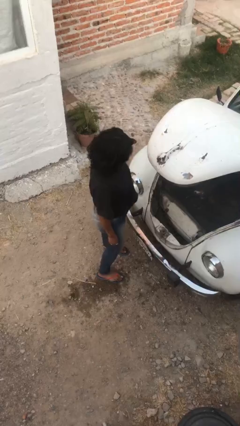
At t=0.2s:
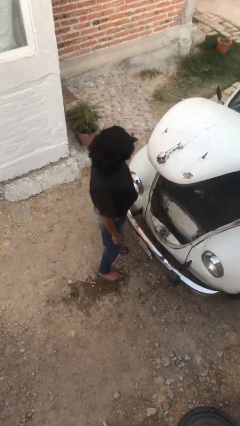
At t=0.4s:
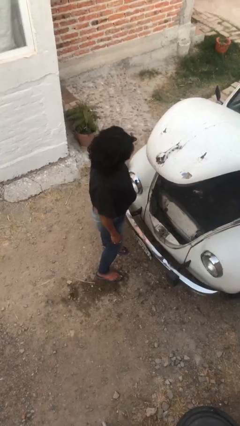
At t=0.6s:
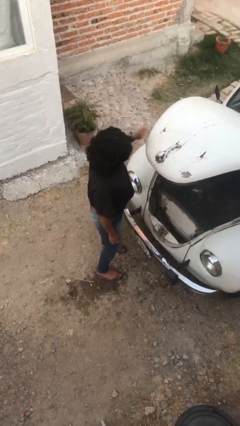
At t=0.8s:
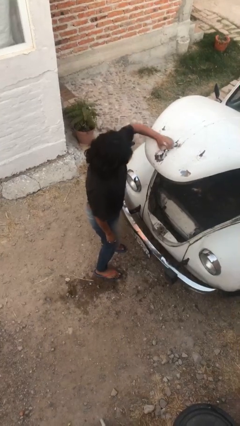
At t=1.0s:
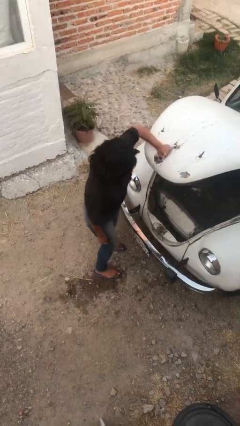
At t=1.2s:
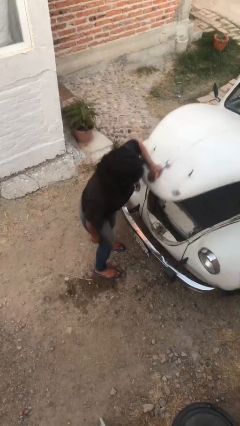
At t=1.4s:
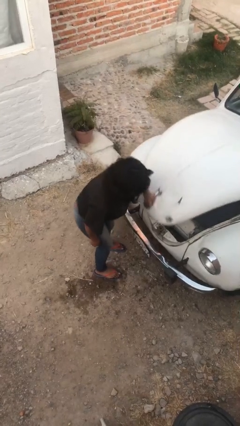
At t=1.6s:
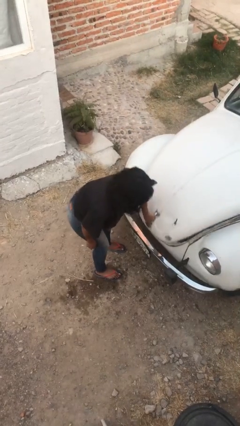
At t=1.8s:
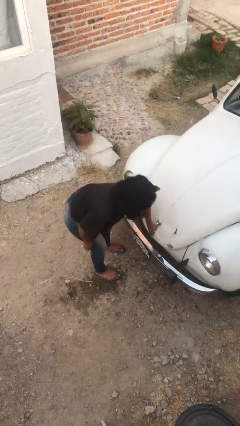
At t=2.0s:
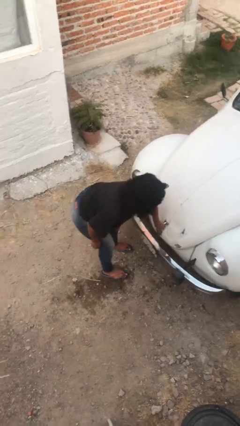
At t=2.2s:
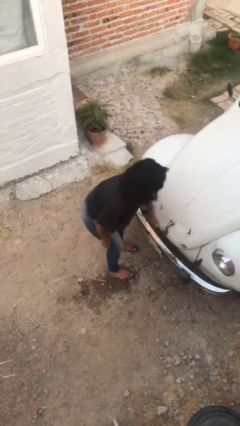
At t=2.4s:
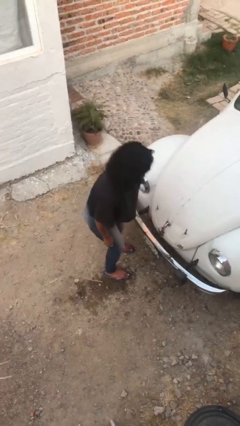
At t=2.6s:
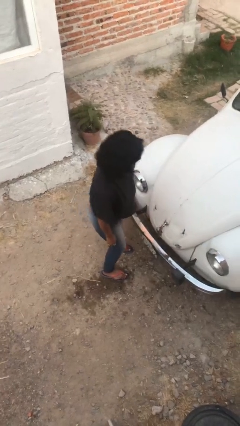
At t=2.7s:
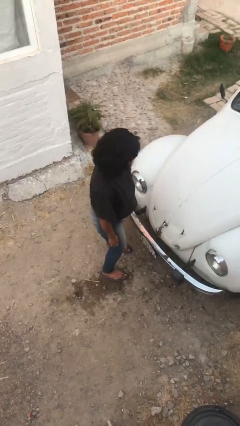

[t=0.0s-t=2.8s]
person closes car trunk

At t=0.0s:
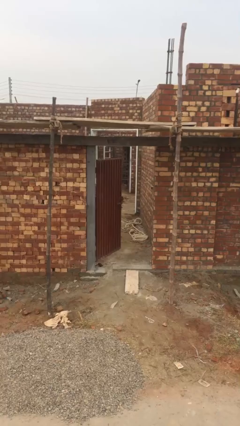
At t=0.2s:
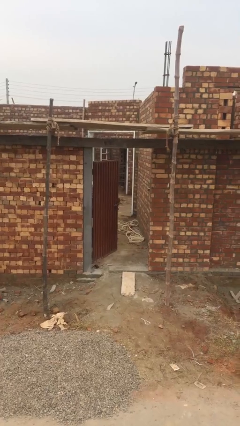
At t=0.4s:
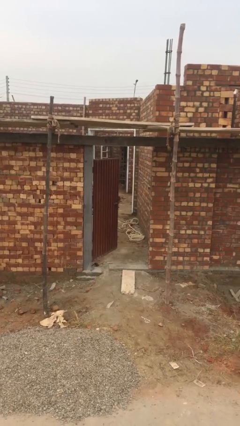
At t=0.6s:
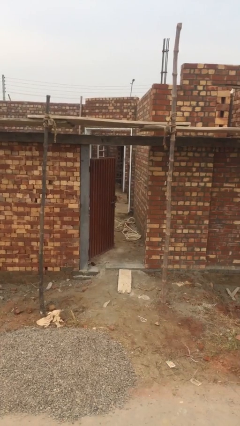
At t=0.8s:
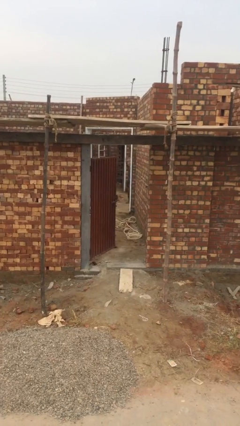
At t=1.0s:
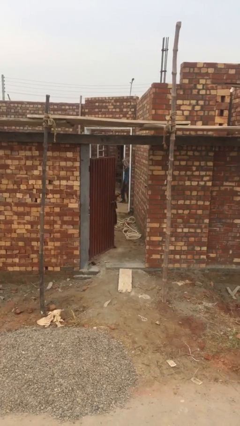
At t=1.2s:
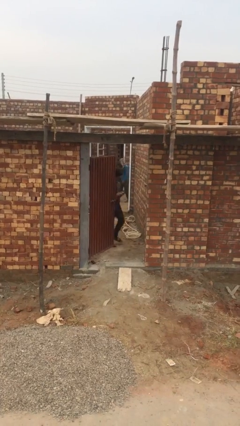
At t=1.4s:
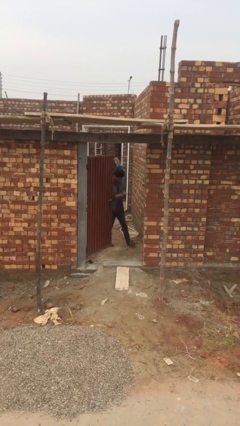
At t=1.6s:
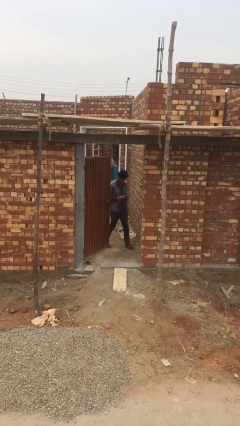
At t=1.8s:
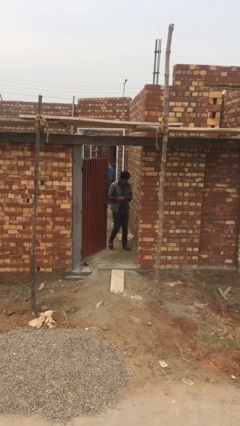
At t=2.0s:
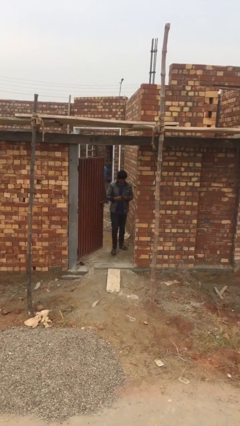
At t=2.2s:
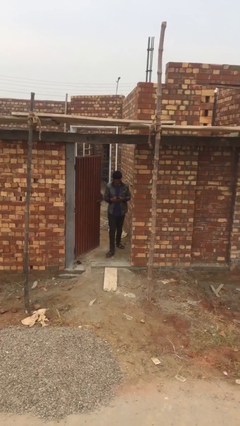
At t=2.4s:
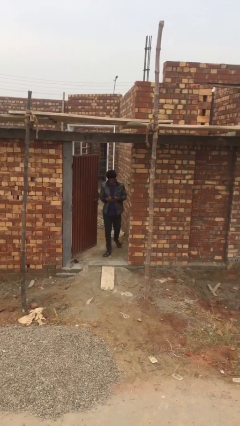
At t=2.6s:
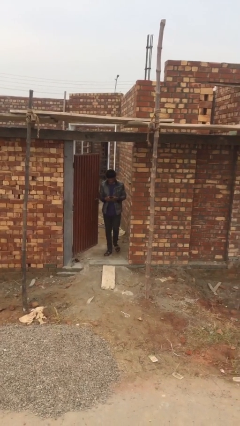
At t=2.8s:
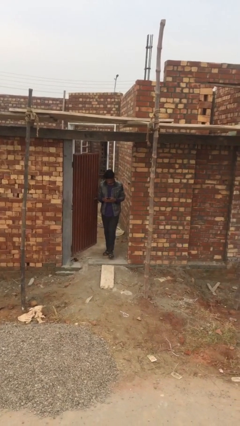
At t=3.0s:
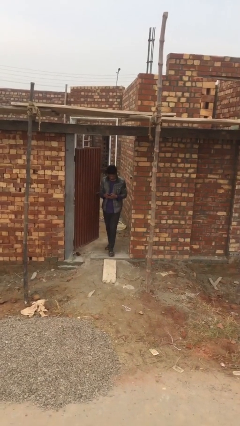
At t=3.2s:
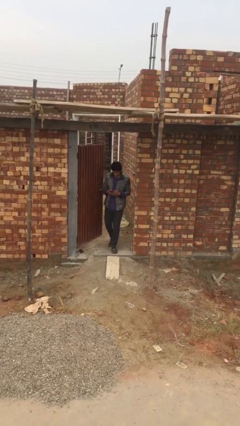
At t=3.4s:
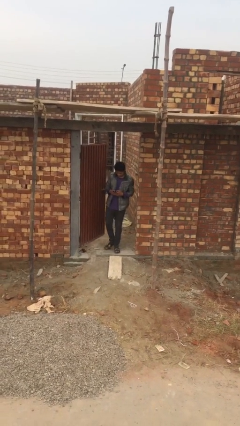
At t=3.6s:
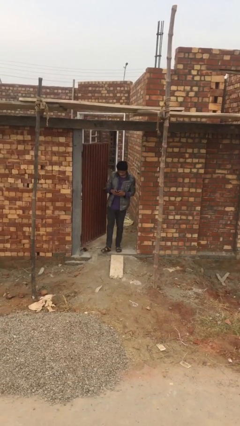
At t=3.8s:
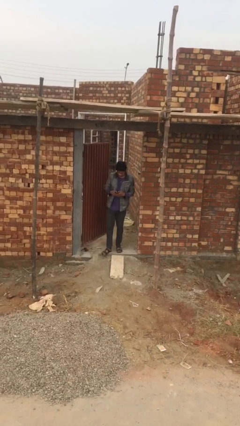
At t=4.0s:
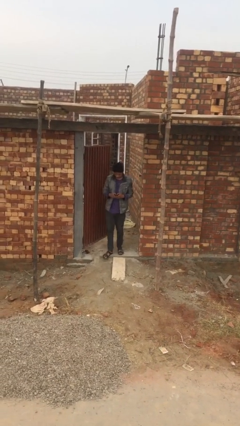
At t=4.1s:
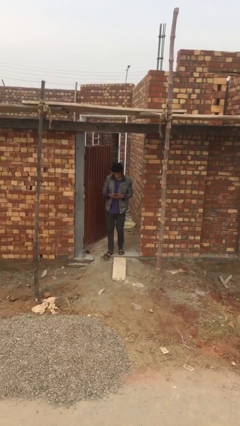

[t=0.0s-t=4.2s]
person enters scene through structure

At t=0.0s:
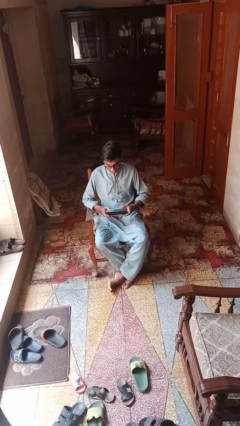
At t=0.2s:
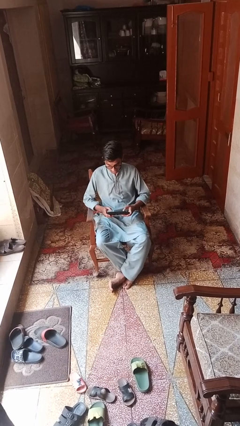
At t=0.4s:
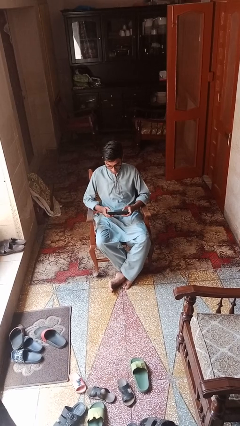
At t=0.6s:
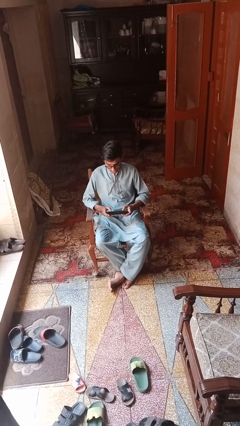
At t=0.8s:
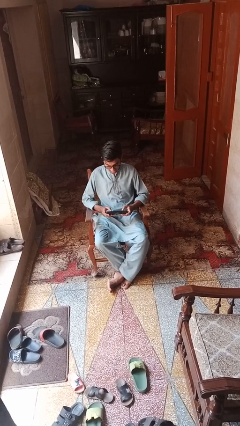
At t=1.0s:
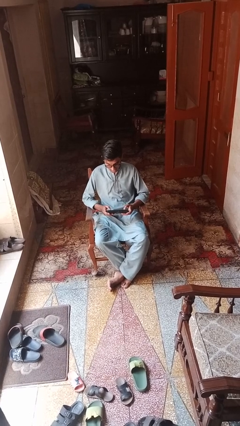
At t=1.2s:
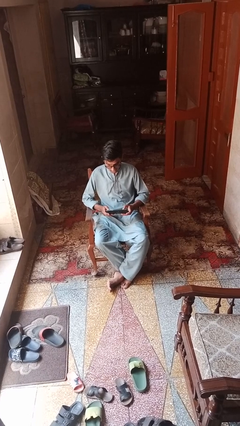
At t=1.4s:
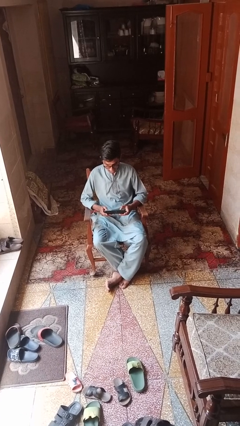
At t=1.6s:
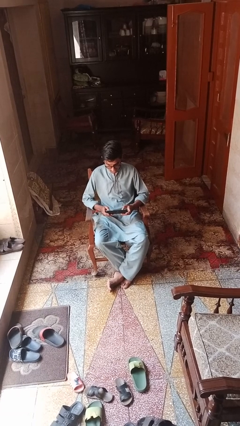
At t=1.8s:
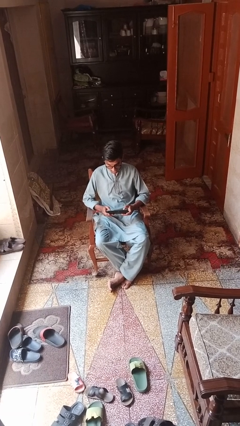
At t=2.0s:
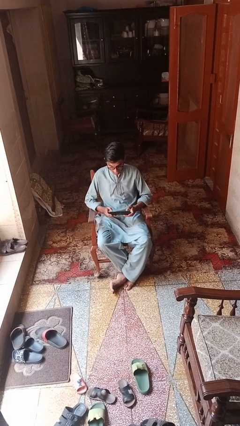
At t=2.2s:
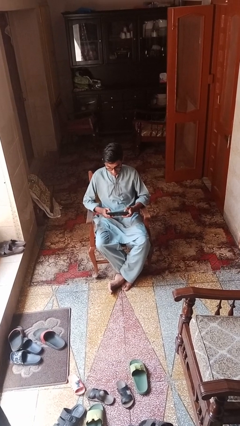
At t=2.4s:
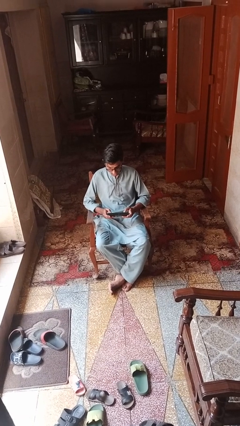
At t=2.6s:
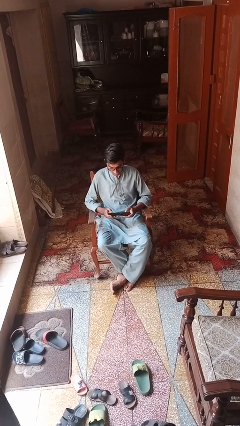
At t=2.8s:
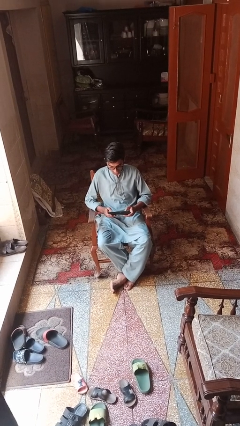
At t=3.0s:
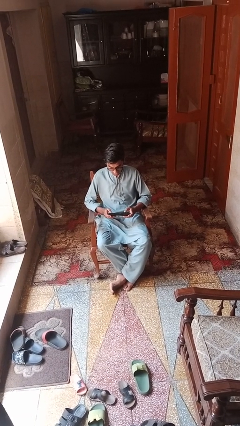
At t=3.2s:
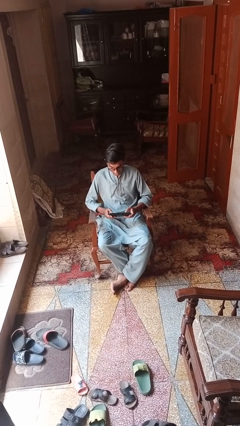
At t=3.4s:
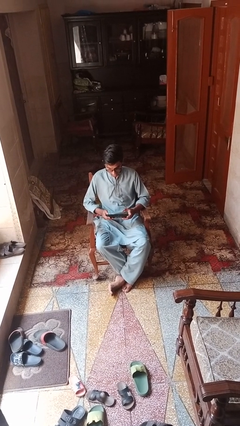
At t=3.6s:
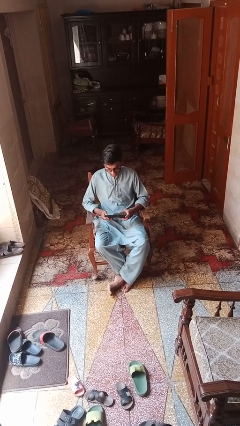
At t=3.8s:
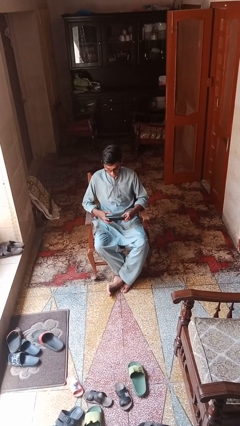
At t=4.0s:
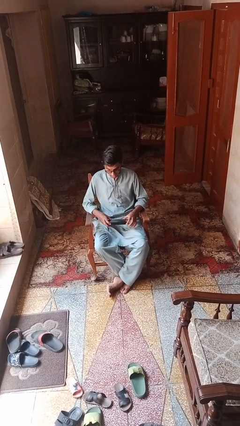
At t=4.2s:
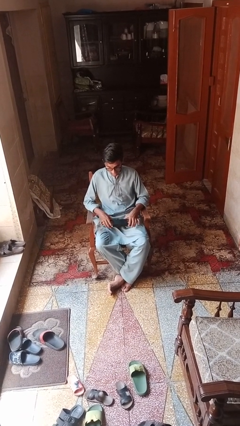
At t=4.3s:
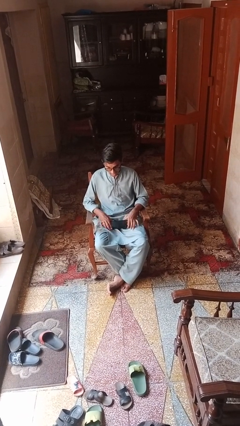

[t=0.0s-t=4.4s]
person interacts with tablet

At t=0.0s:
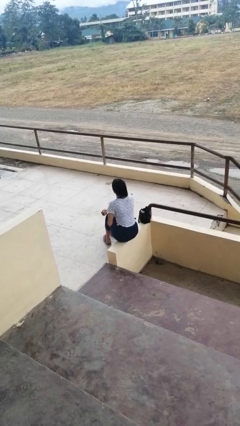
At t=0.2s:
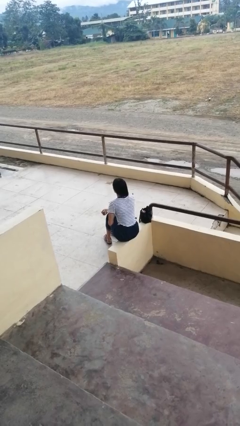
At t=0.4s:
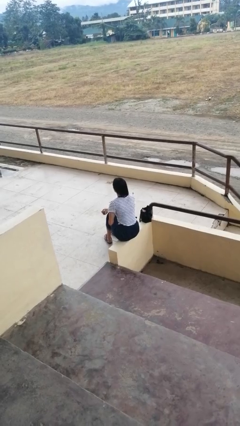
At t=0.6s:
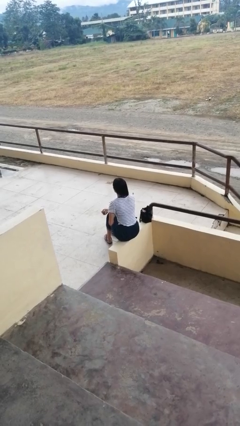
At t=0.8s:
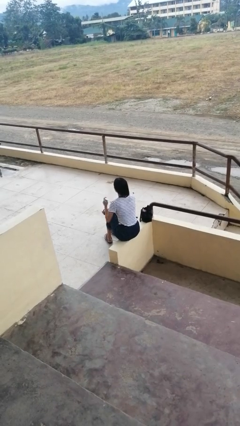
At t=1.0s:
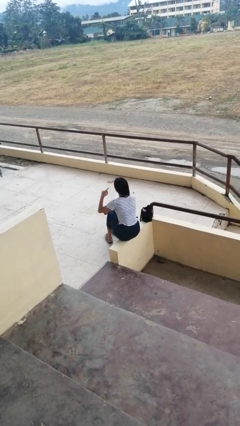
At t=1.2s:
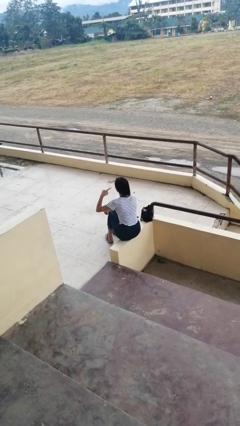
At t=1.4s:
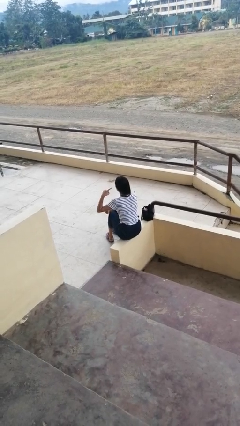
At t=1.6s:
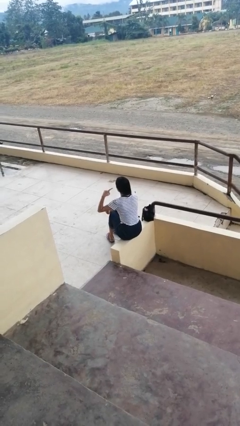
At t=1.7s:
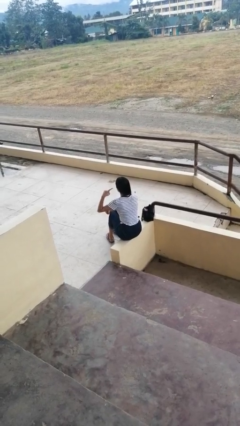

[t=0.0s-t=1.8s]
person gestures listen closely

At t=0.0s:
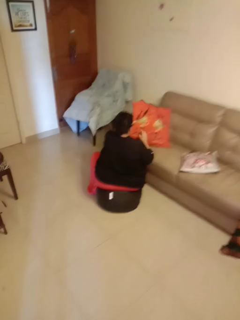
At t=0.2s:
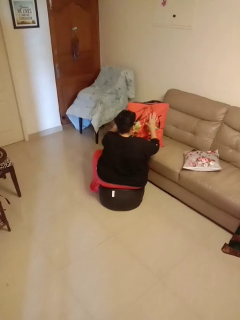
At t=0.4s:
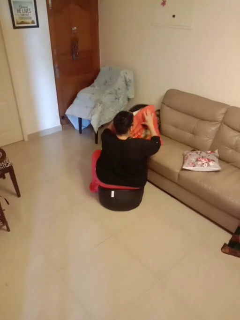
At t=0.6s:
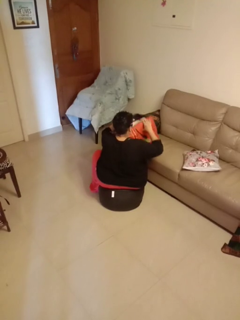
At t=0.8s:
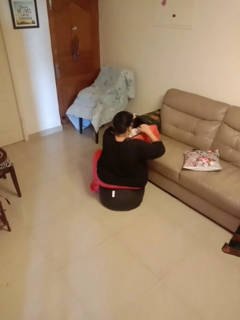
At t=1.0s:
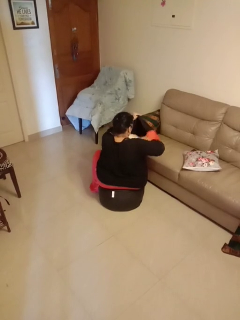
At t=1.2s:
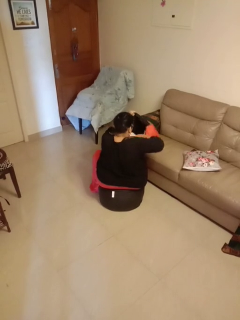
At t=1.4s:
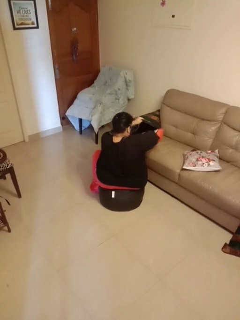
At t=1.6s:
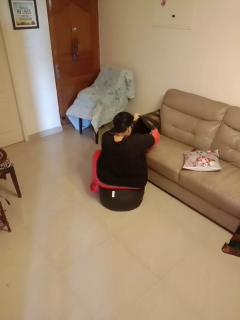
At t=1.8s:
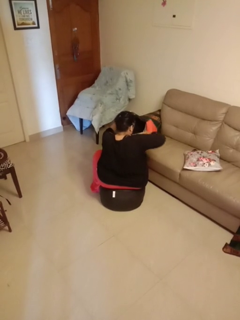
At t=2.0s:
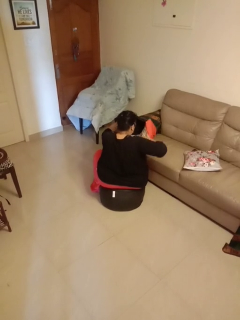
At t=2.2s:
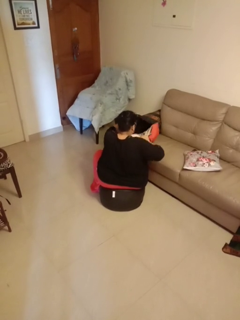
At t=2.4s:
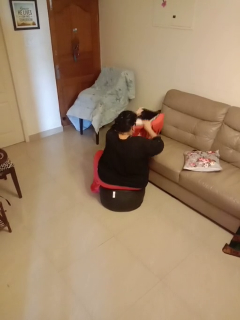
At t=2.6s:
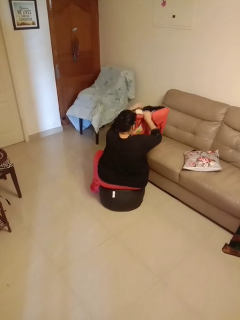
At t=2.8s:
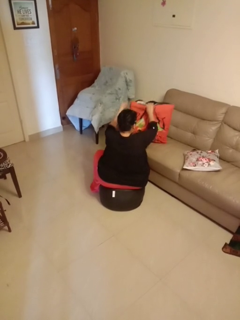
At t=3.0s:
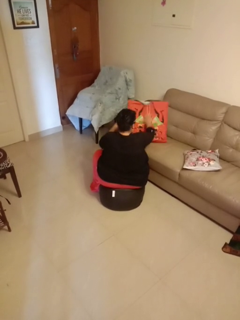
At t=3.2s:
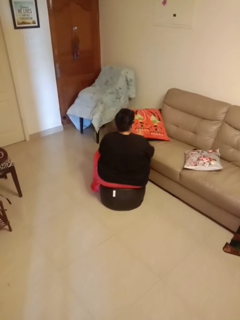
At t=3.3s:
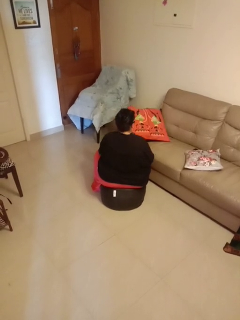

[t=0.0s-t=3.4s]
person searches in couch

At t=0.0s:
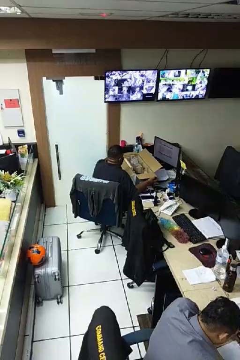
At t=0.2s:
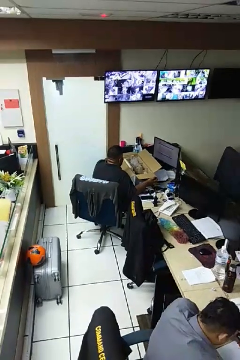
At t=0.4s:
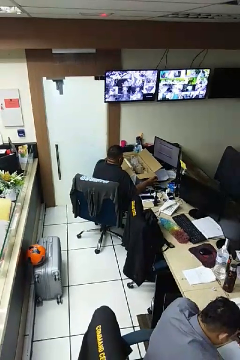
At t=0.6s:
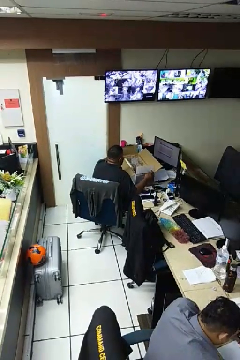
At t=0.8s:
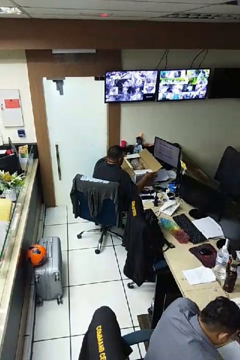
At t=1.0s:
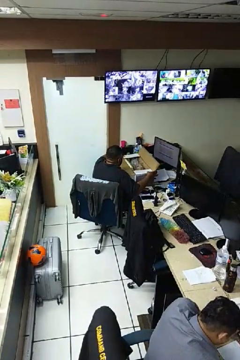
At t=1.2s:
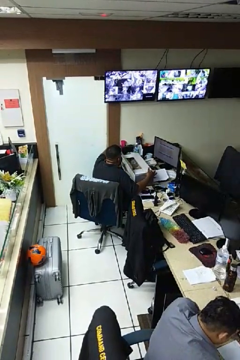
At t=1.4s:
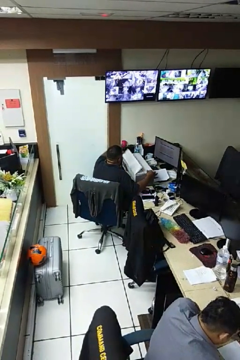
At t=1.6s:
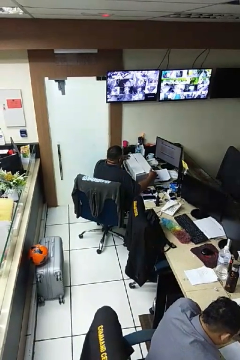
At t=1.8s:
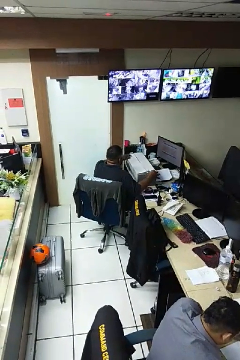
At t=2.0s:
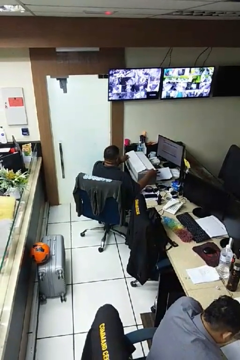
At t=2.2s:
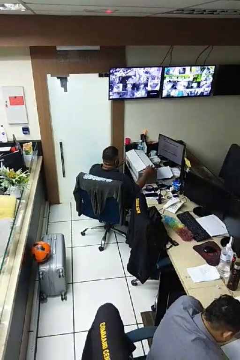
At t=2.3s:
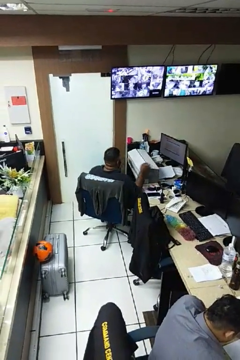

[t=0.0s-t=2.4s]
person closes box
